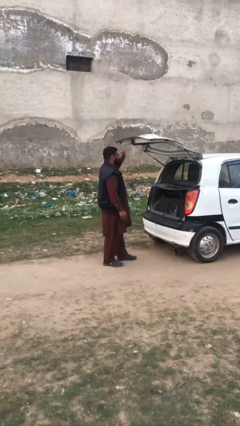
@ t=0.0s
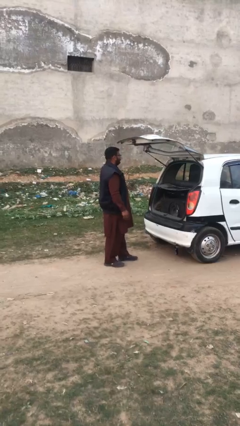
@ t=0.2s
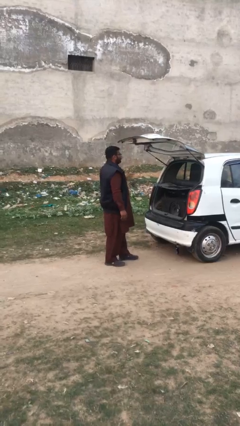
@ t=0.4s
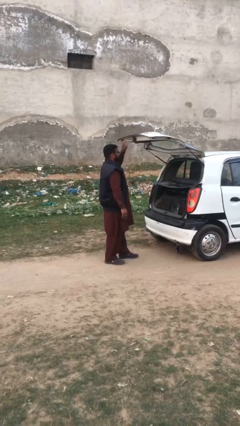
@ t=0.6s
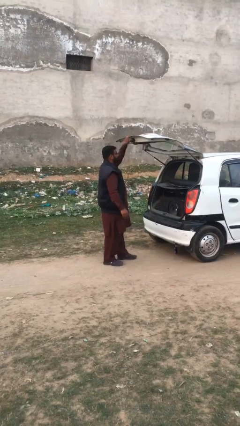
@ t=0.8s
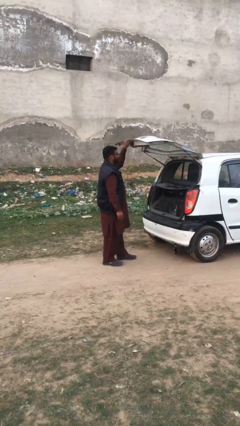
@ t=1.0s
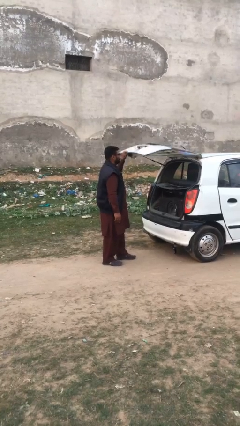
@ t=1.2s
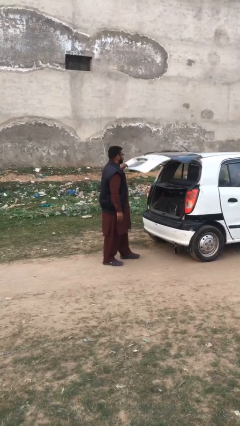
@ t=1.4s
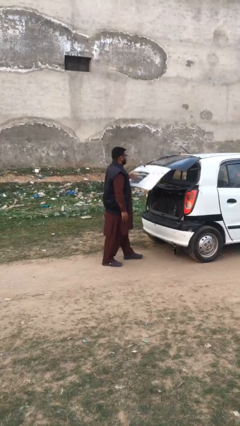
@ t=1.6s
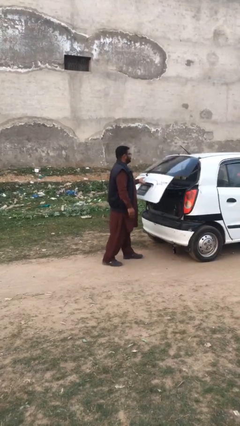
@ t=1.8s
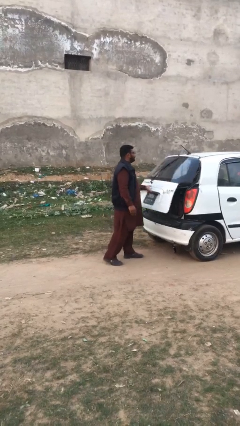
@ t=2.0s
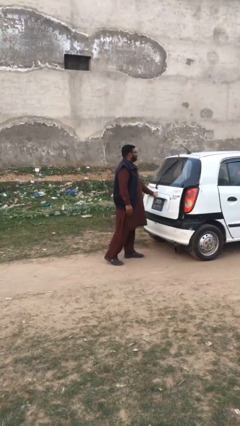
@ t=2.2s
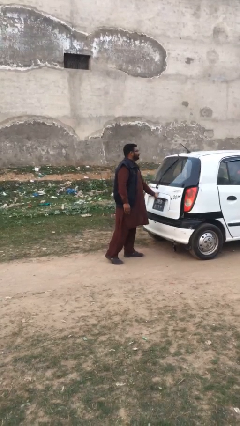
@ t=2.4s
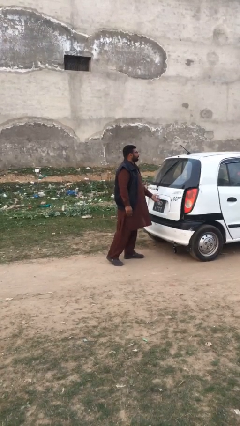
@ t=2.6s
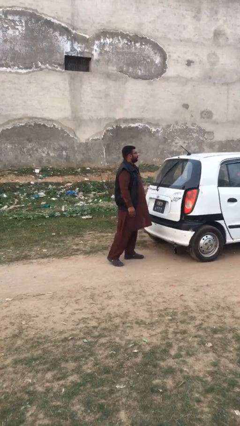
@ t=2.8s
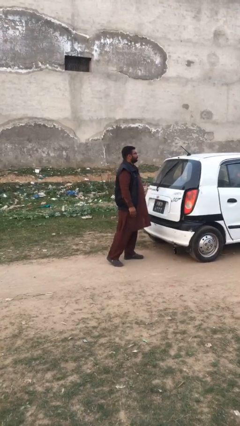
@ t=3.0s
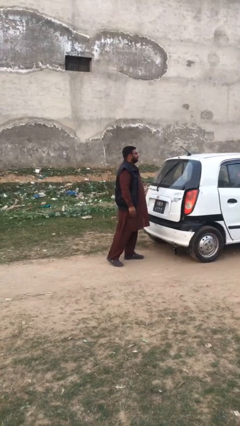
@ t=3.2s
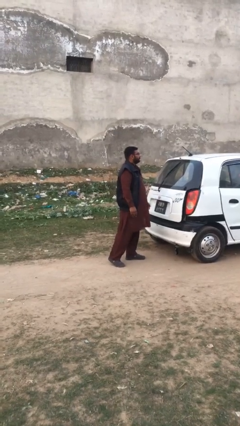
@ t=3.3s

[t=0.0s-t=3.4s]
person closes car trunk

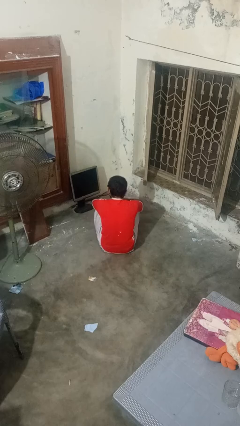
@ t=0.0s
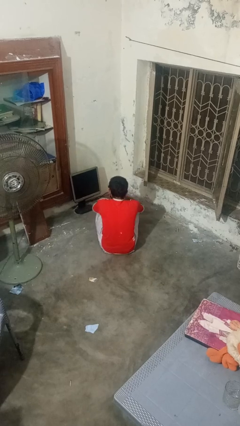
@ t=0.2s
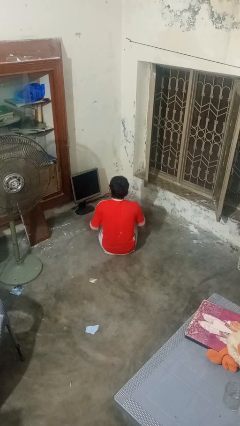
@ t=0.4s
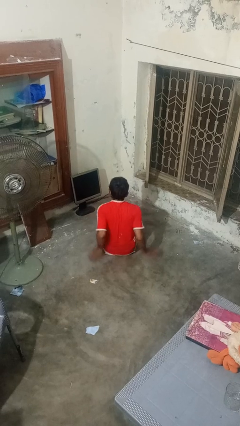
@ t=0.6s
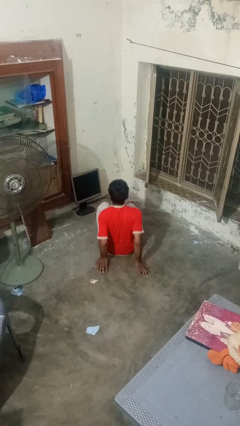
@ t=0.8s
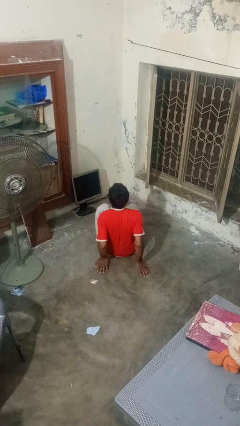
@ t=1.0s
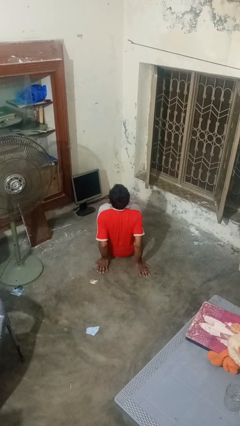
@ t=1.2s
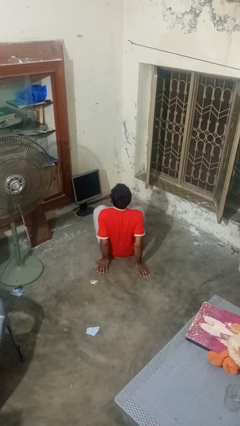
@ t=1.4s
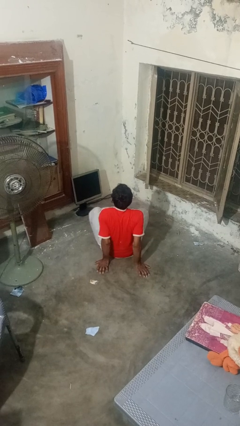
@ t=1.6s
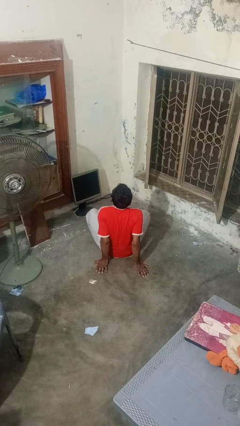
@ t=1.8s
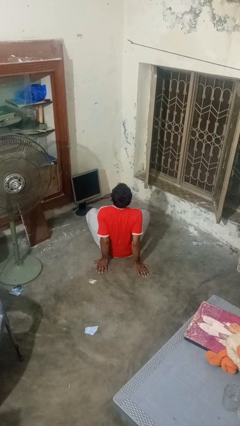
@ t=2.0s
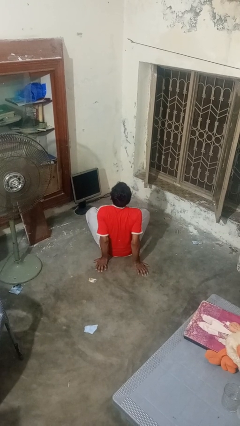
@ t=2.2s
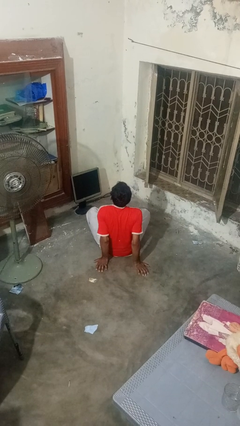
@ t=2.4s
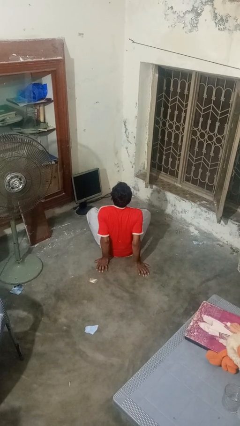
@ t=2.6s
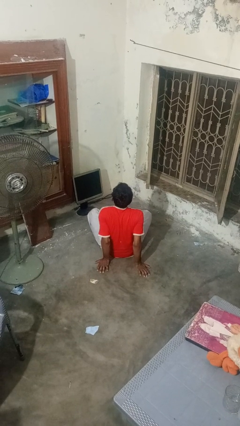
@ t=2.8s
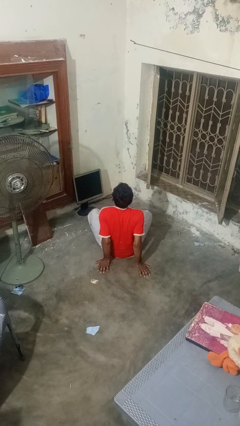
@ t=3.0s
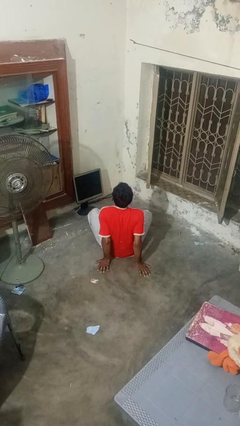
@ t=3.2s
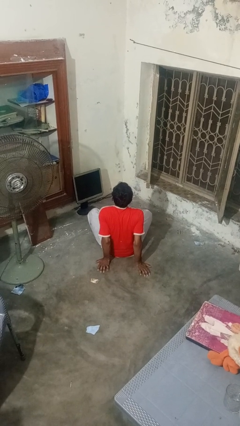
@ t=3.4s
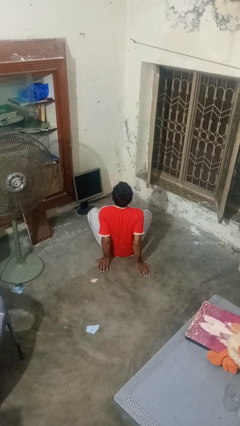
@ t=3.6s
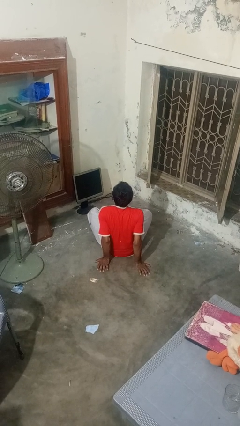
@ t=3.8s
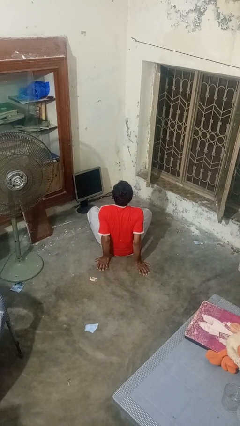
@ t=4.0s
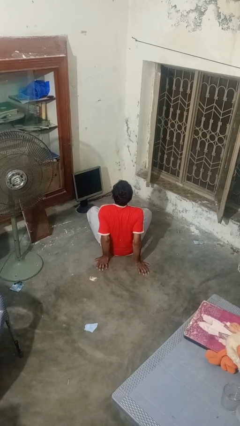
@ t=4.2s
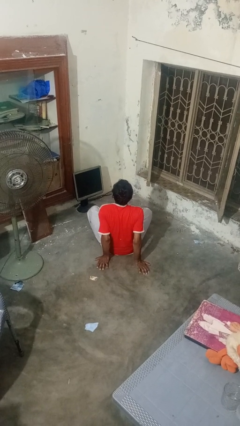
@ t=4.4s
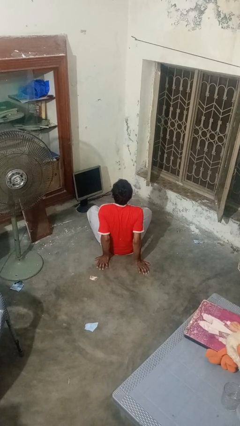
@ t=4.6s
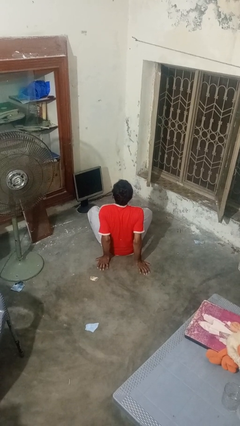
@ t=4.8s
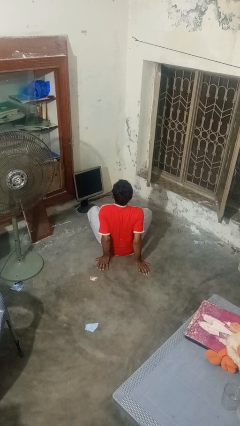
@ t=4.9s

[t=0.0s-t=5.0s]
person crosses legs

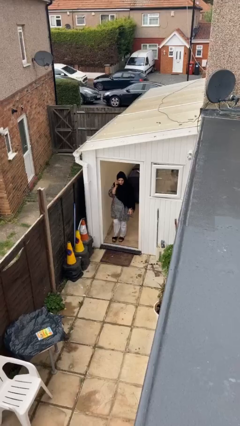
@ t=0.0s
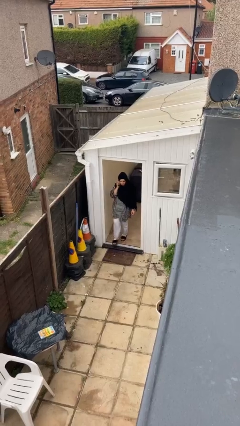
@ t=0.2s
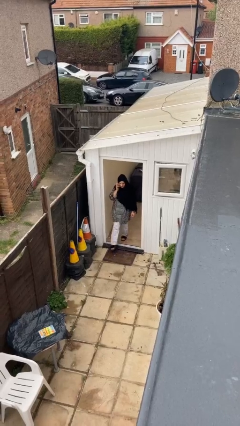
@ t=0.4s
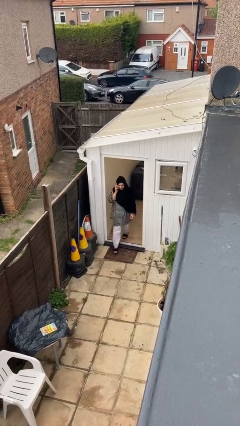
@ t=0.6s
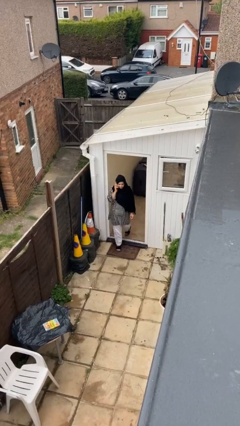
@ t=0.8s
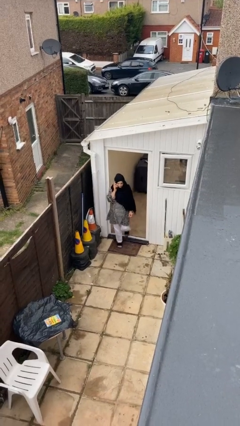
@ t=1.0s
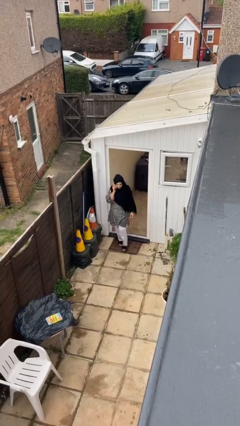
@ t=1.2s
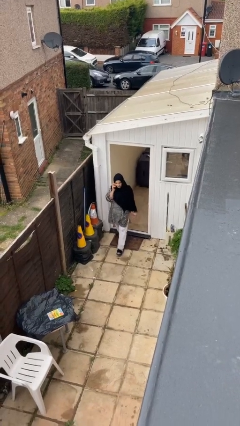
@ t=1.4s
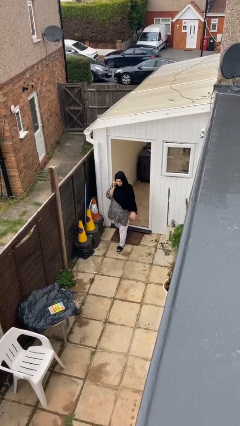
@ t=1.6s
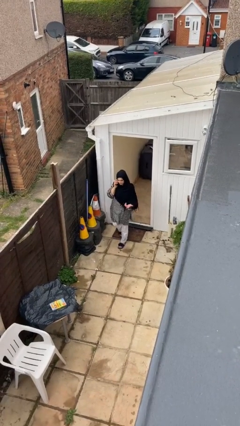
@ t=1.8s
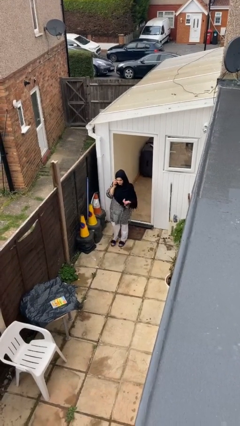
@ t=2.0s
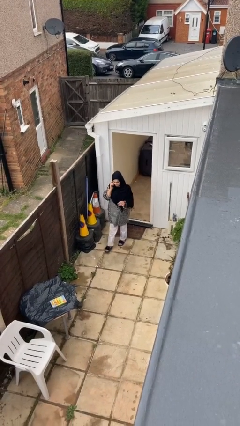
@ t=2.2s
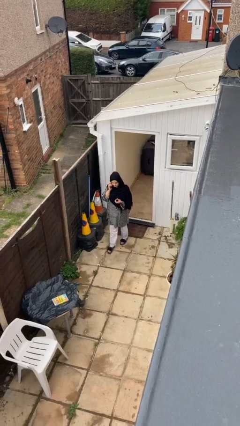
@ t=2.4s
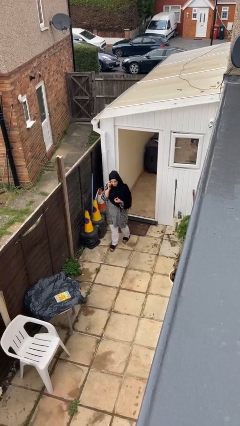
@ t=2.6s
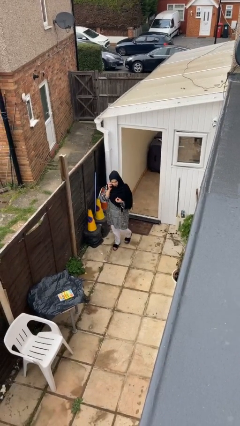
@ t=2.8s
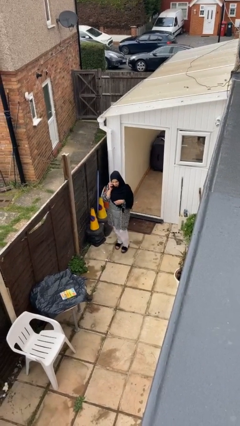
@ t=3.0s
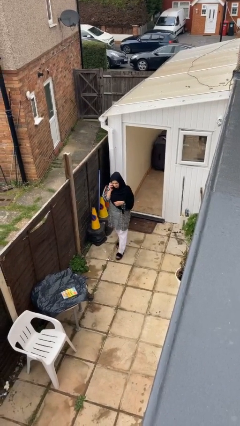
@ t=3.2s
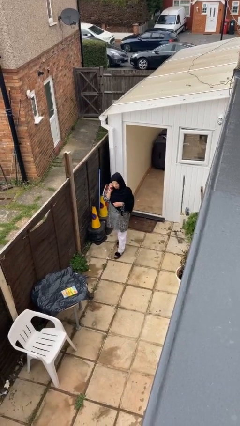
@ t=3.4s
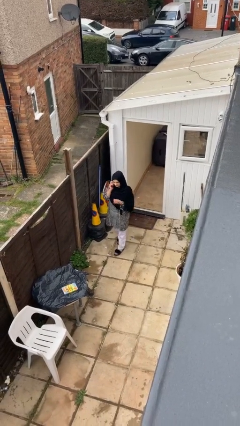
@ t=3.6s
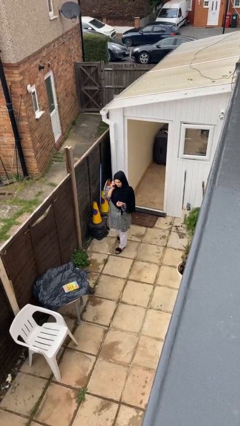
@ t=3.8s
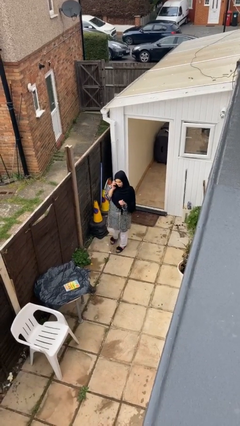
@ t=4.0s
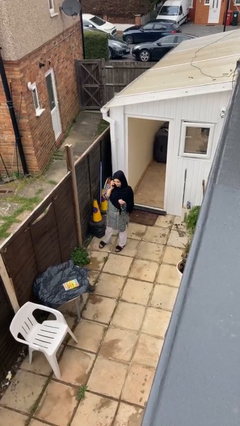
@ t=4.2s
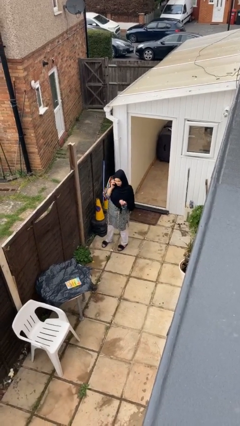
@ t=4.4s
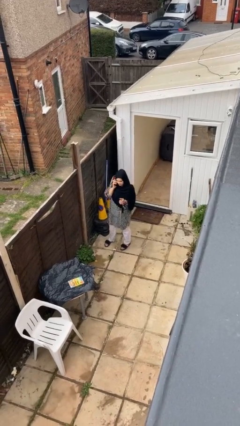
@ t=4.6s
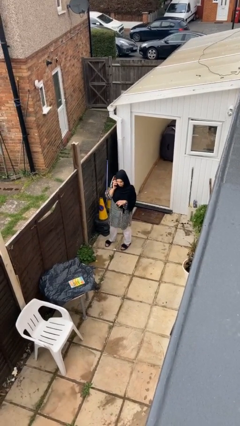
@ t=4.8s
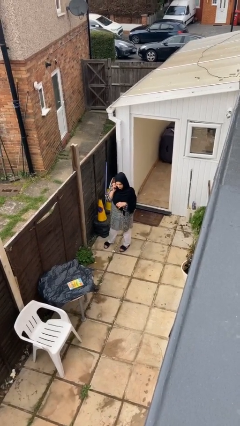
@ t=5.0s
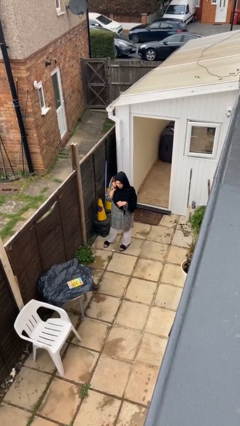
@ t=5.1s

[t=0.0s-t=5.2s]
person enters scene through structure

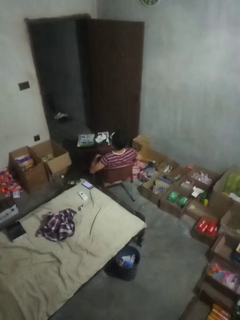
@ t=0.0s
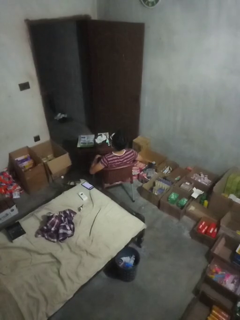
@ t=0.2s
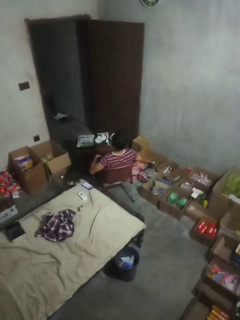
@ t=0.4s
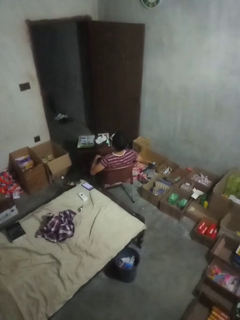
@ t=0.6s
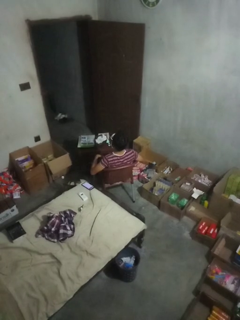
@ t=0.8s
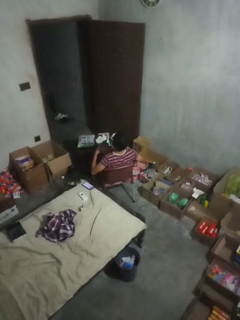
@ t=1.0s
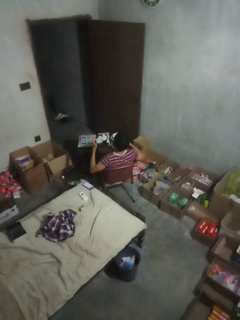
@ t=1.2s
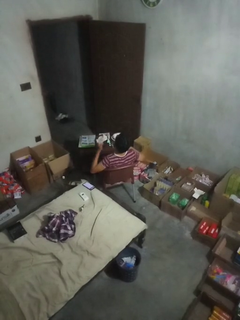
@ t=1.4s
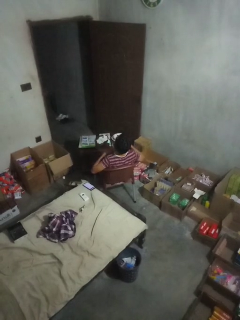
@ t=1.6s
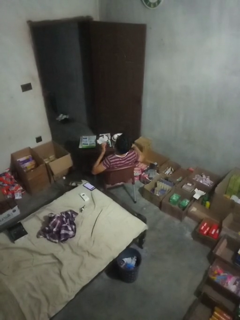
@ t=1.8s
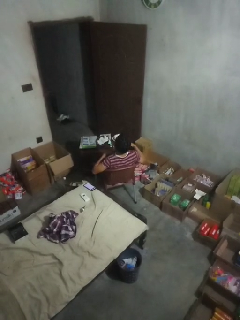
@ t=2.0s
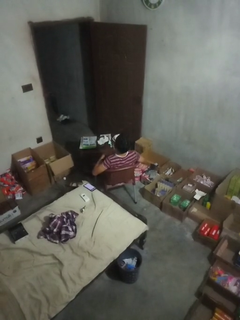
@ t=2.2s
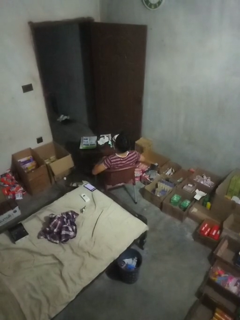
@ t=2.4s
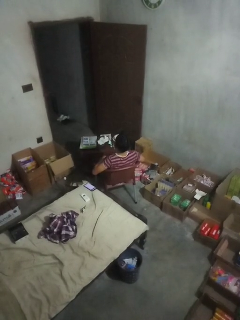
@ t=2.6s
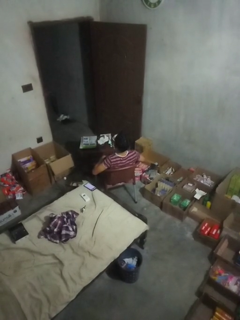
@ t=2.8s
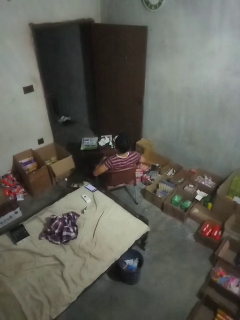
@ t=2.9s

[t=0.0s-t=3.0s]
person drums on chest

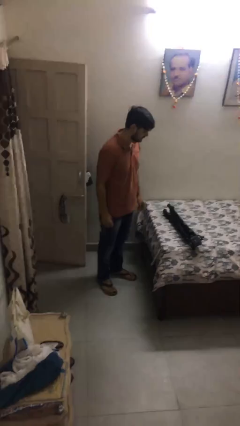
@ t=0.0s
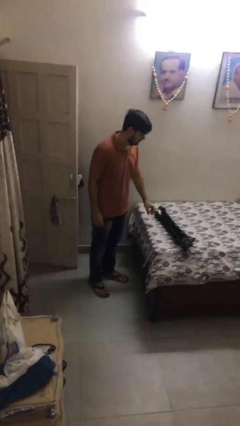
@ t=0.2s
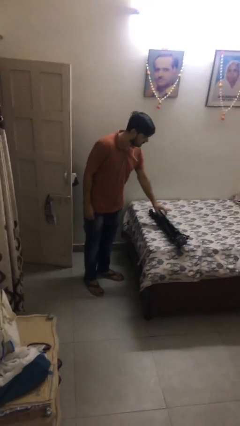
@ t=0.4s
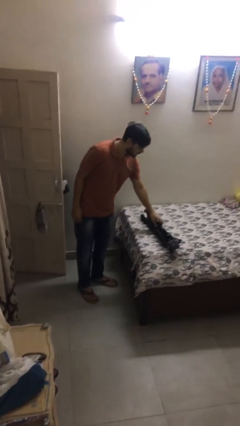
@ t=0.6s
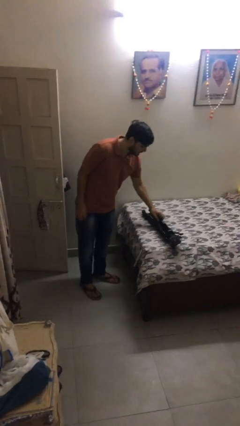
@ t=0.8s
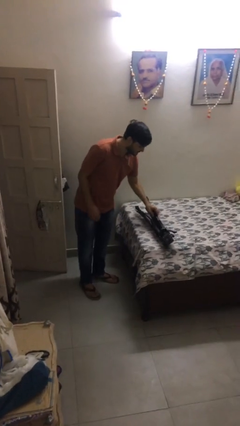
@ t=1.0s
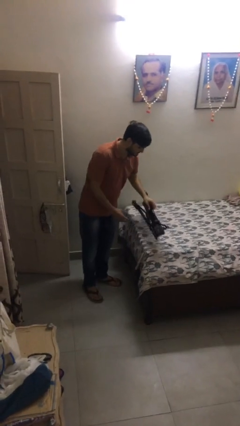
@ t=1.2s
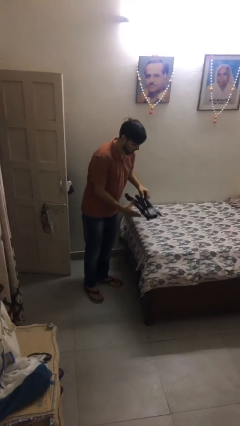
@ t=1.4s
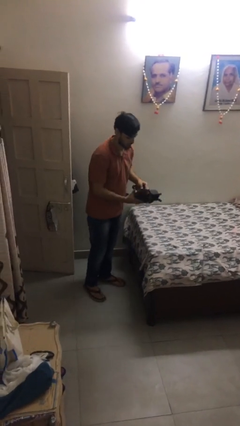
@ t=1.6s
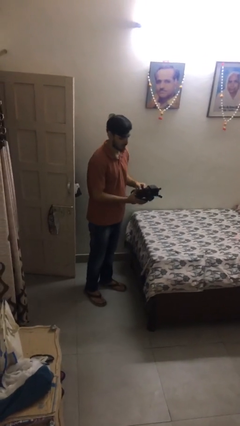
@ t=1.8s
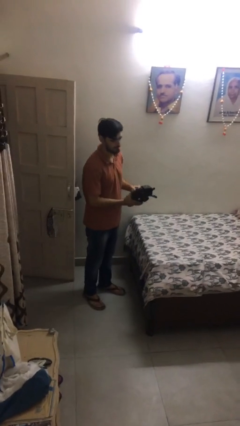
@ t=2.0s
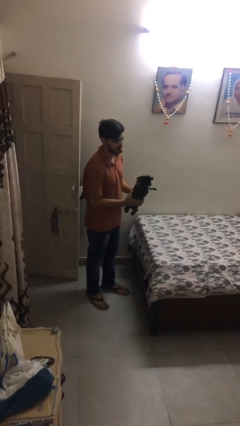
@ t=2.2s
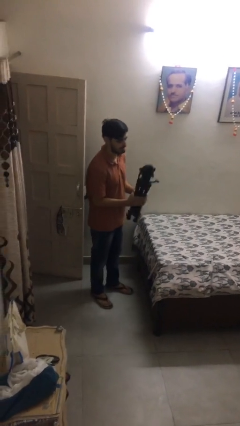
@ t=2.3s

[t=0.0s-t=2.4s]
person picks up object from bed
